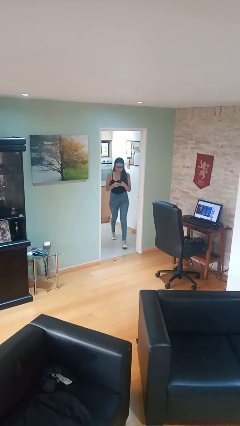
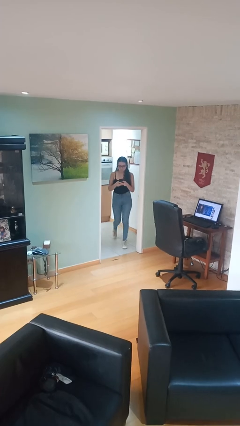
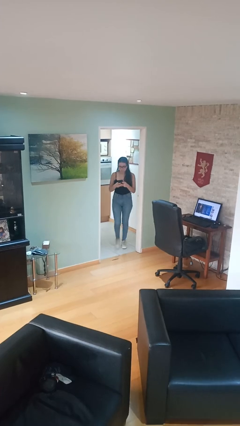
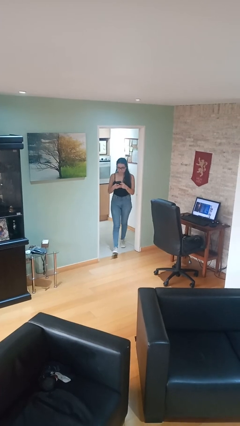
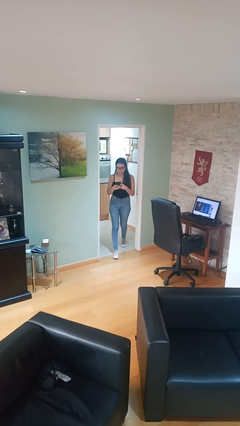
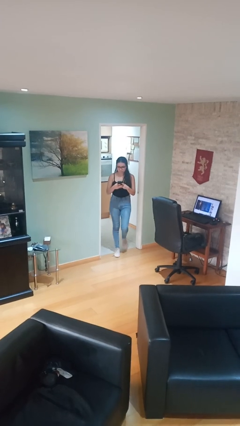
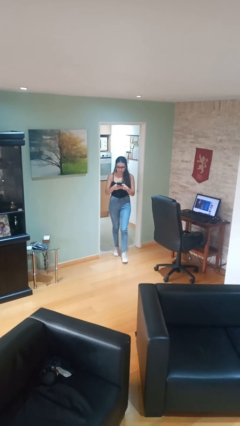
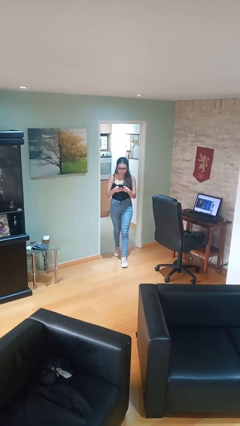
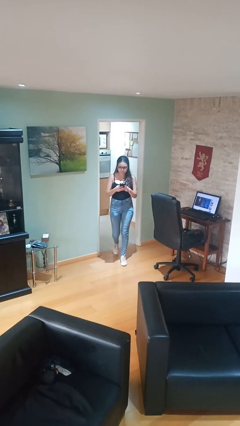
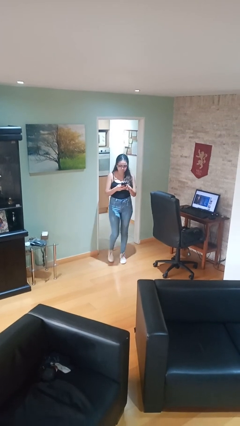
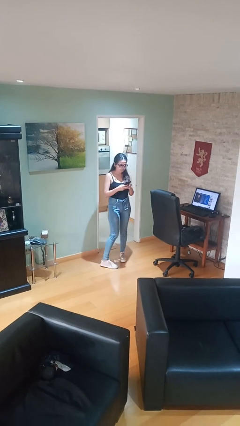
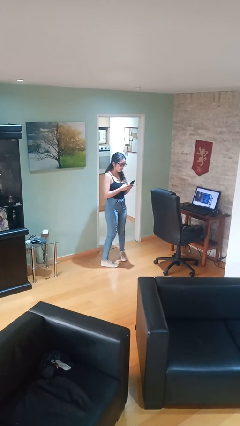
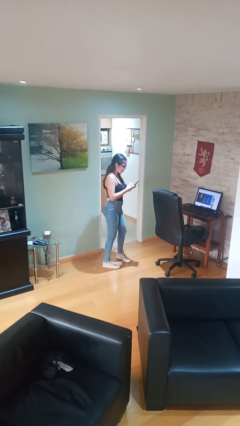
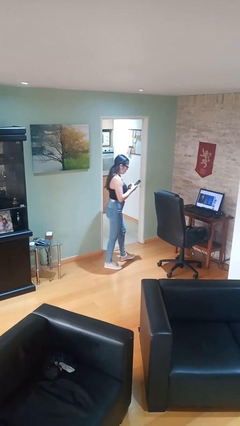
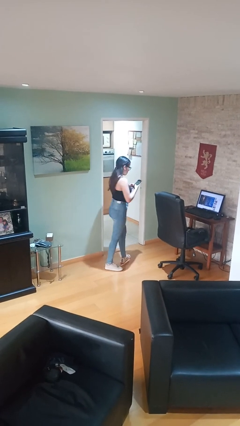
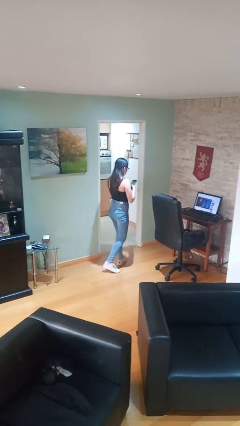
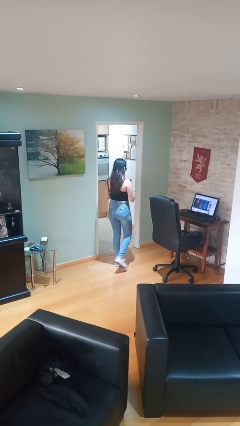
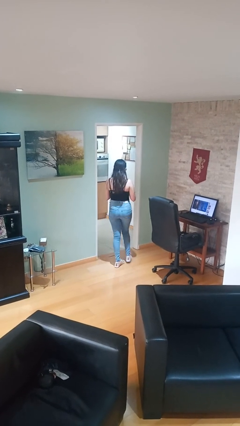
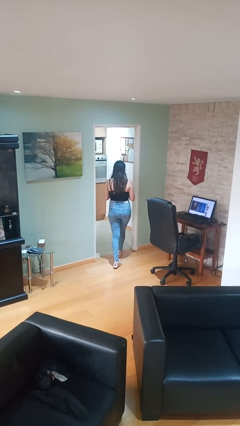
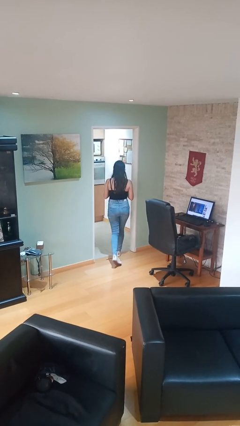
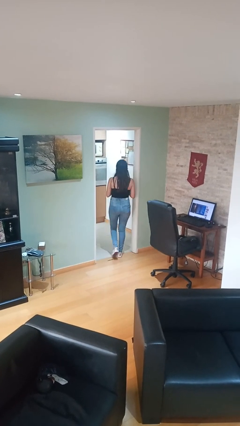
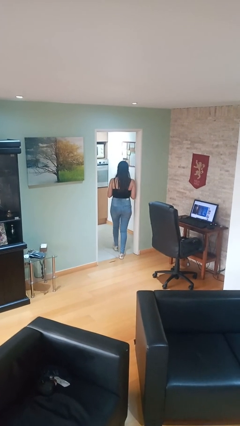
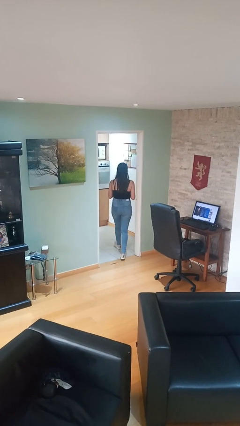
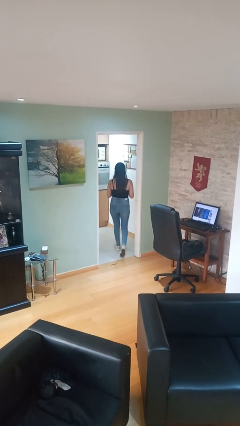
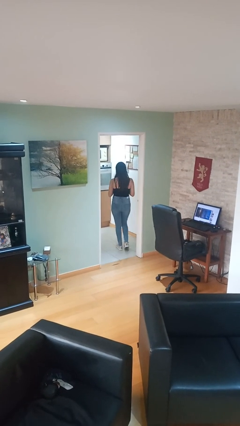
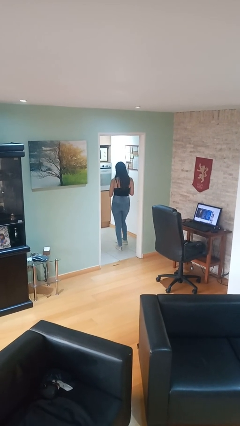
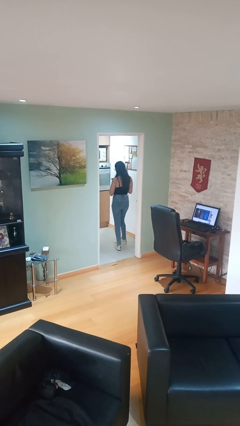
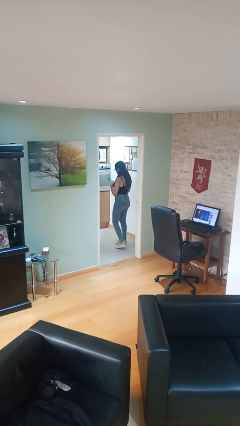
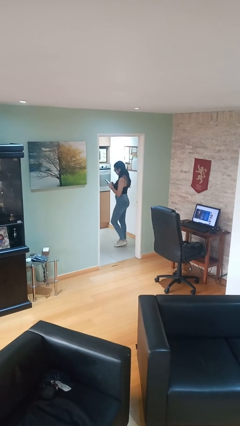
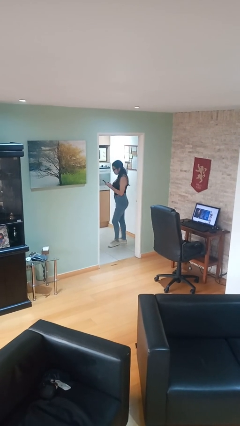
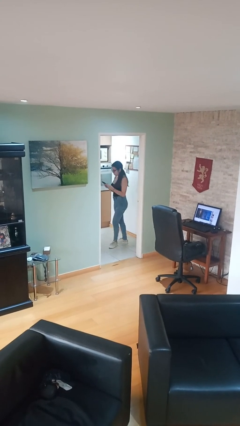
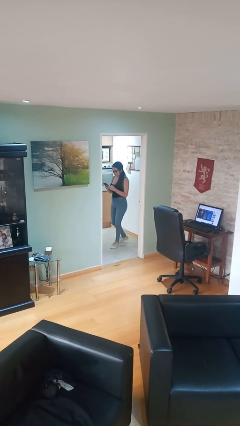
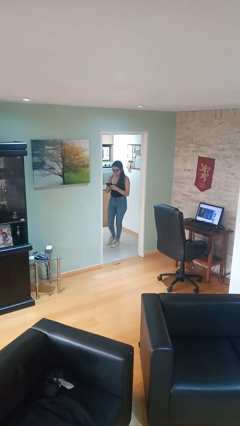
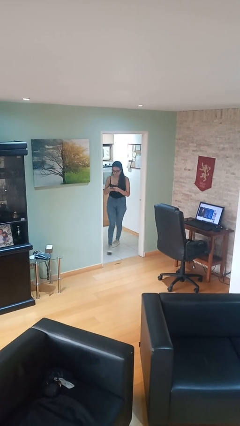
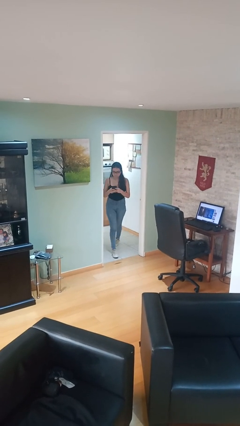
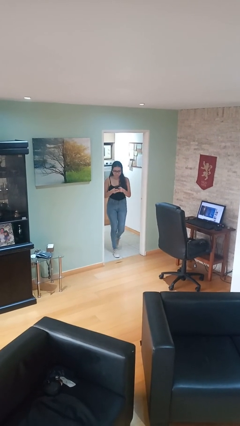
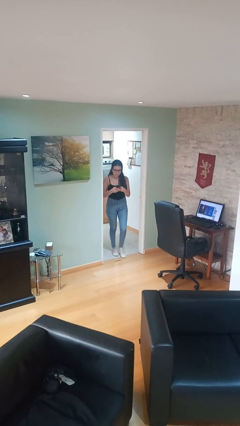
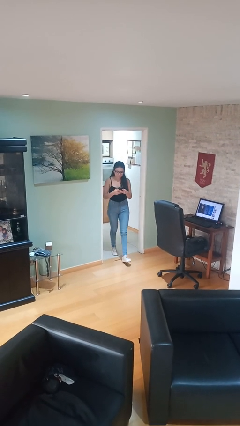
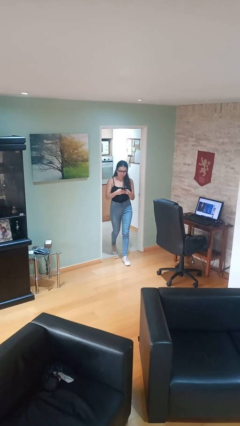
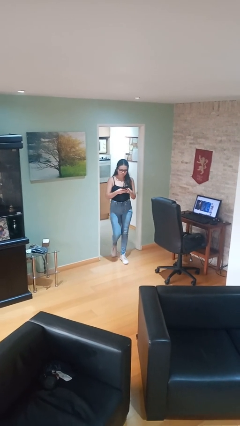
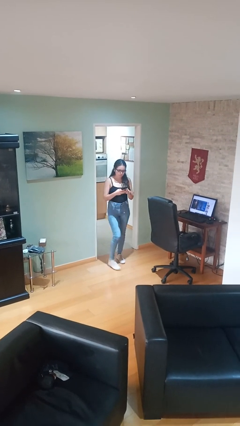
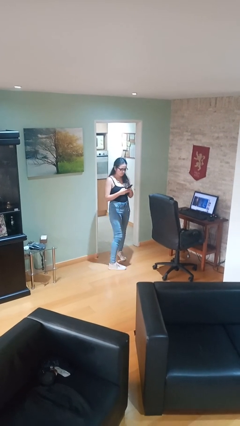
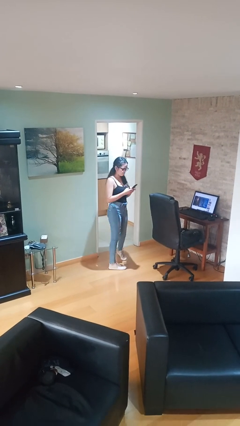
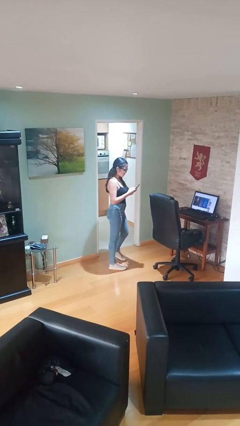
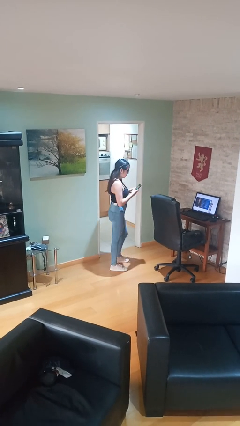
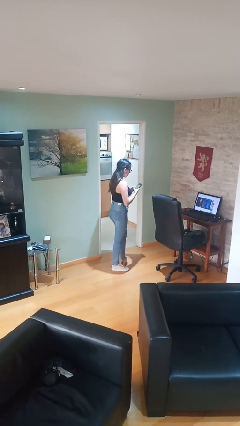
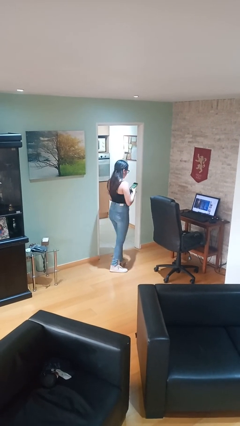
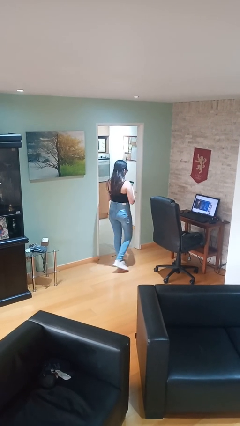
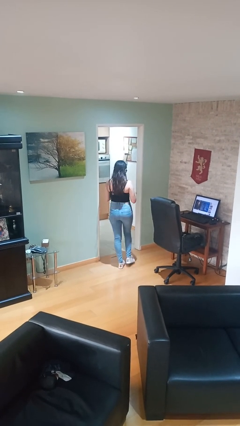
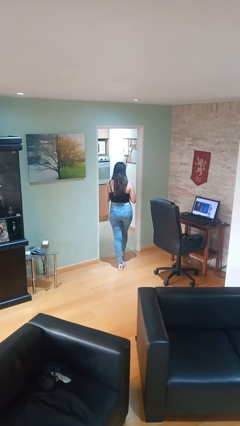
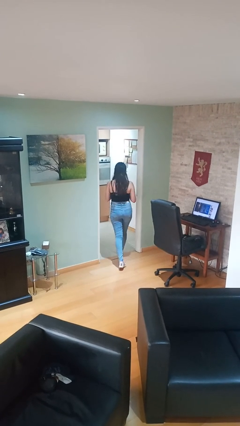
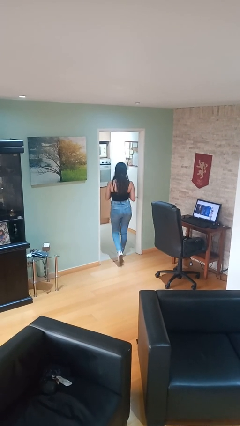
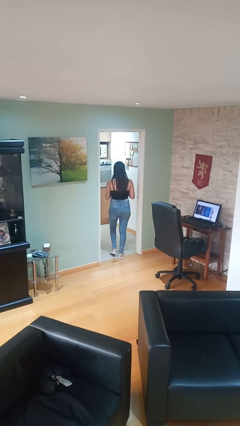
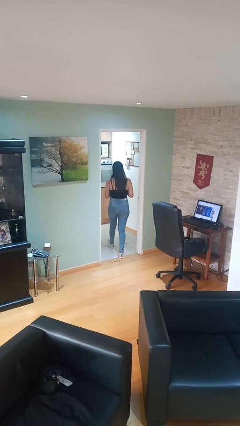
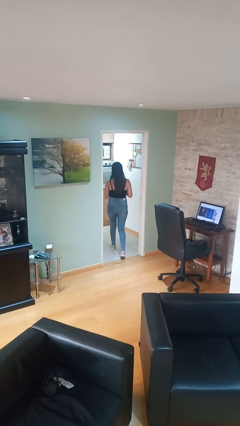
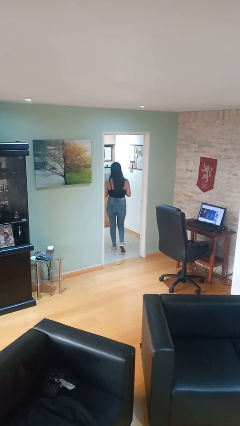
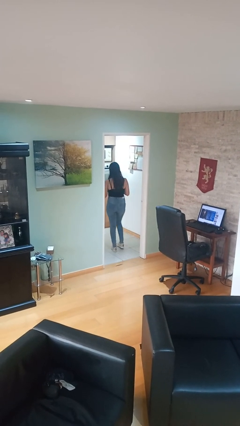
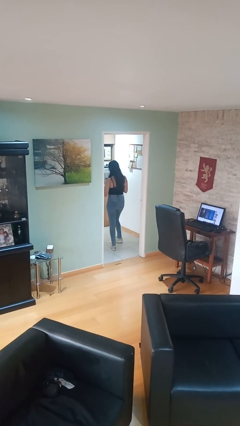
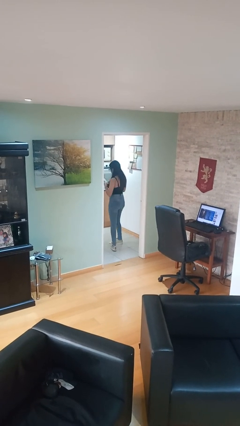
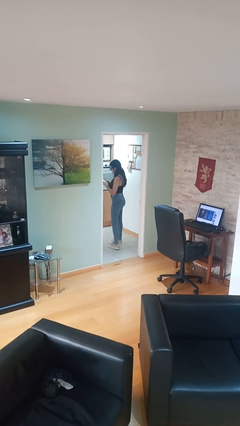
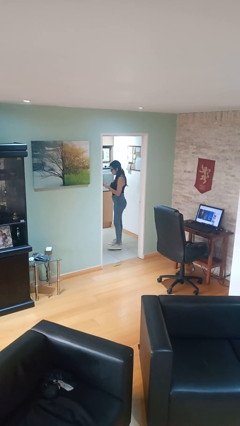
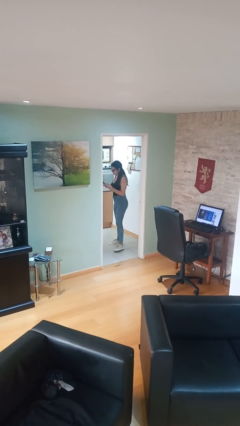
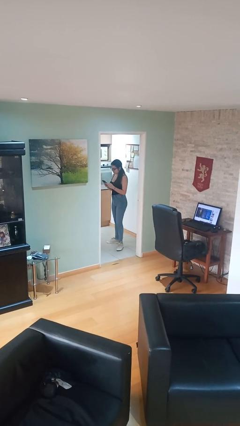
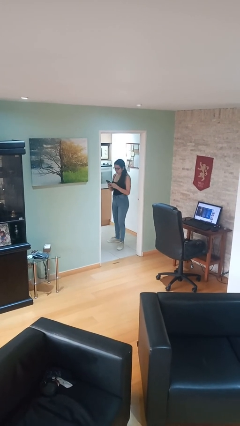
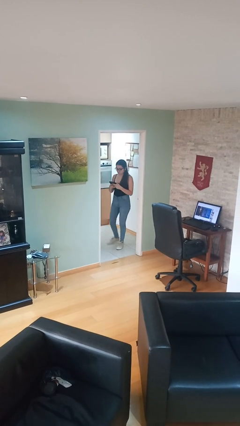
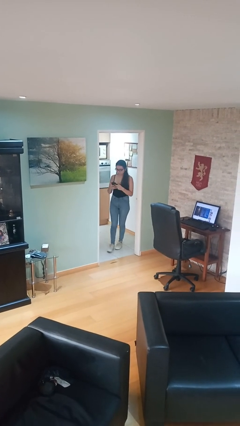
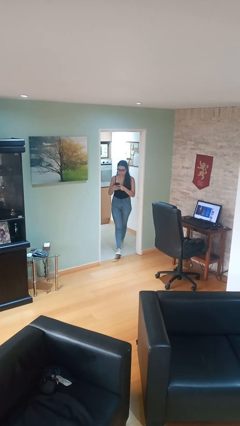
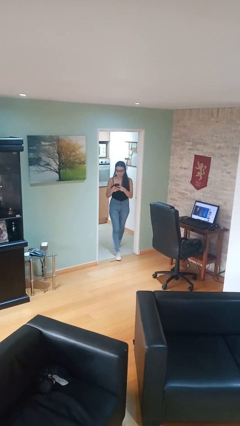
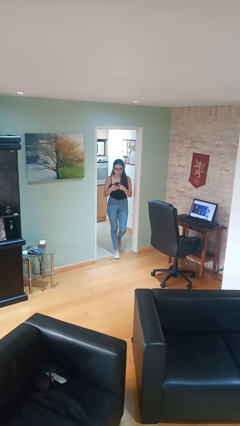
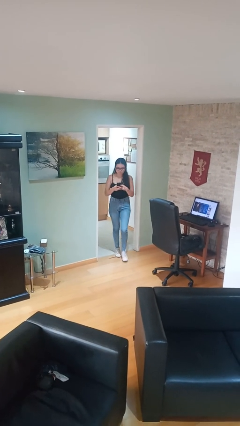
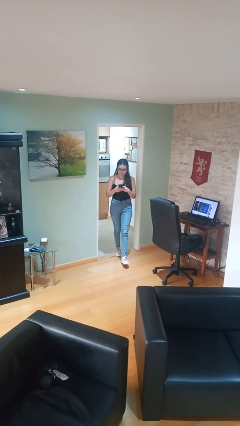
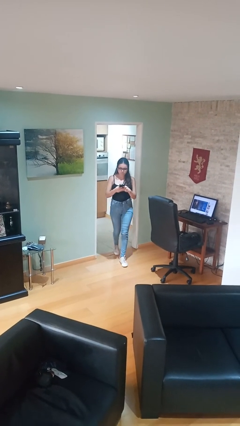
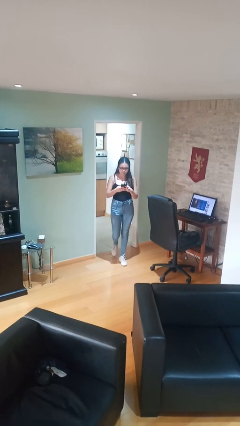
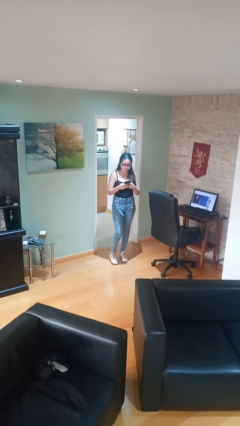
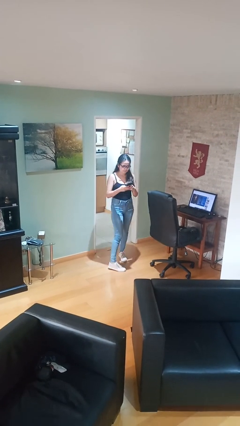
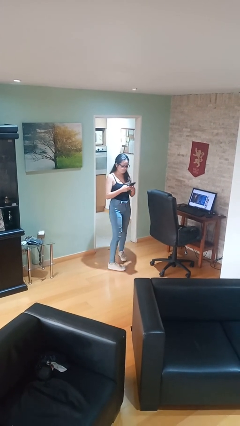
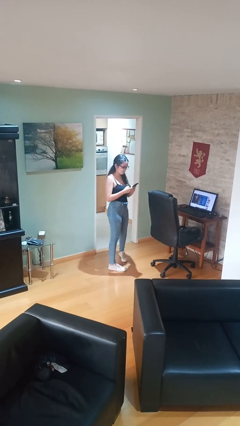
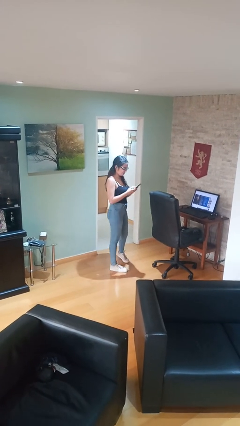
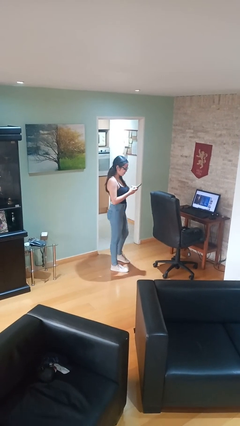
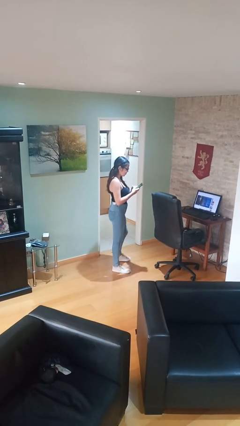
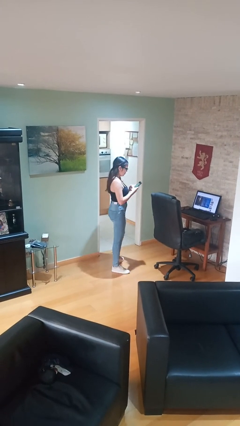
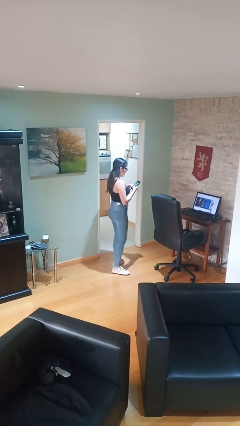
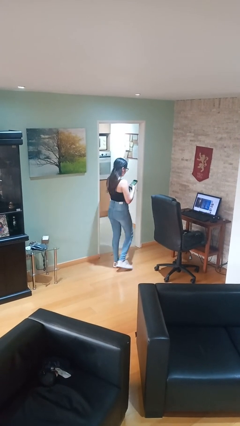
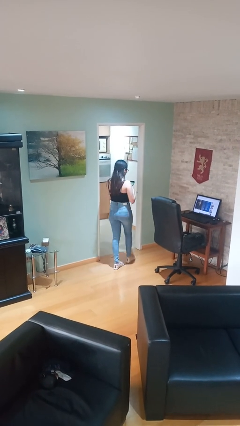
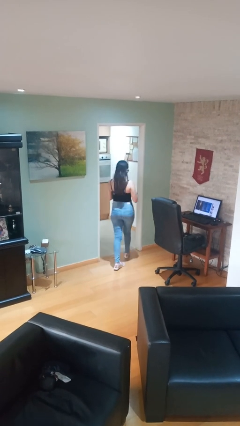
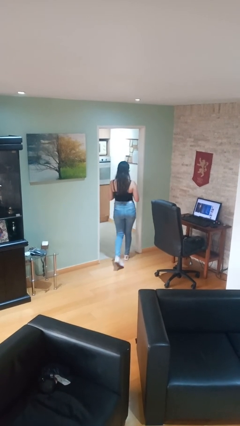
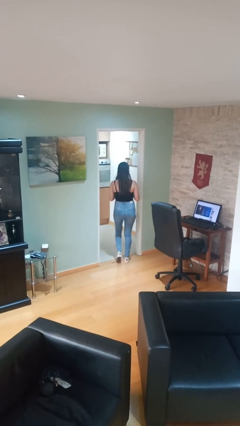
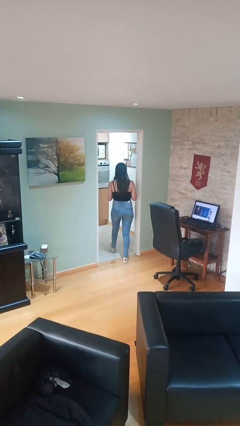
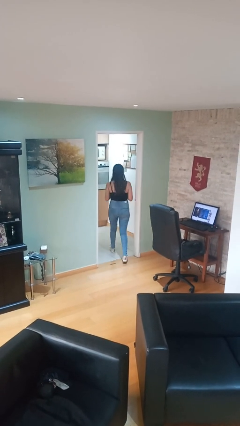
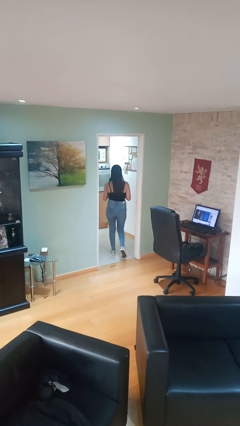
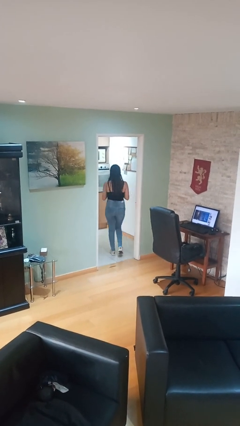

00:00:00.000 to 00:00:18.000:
person texts on phone

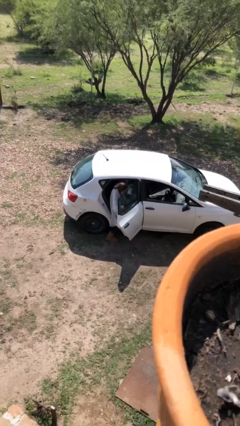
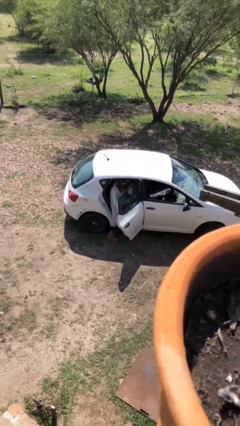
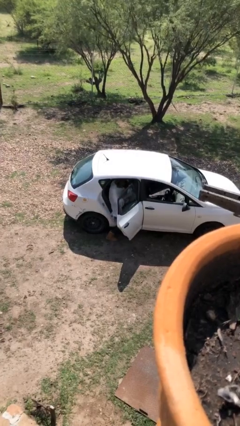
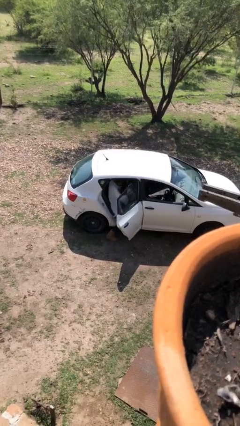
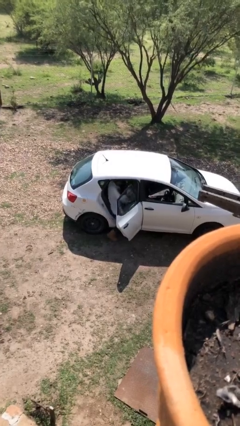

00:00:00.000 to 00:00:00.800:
person closes car door
